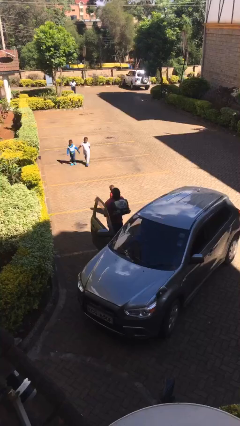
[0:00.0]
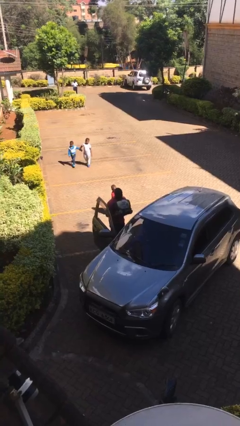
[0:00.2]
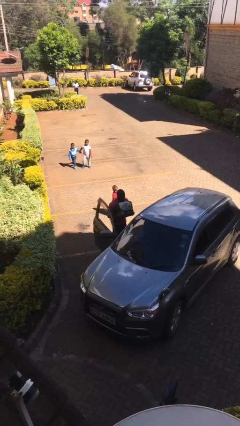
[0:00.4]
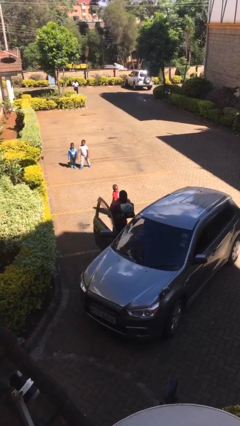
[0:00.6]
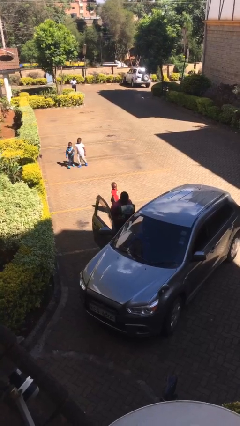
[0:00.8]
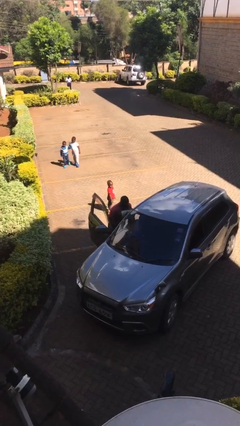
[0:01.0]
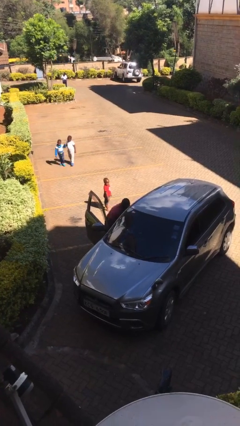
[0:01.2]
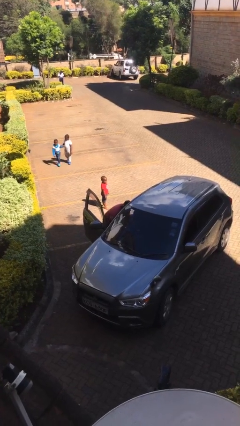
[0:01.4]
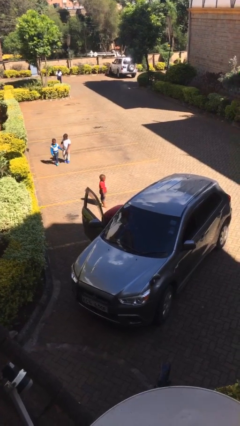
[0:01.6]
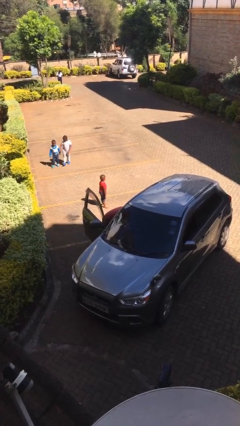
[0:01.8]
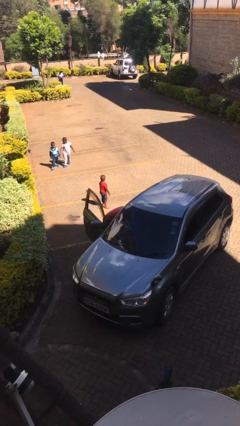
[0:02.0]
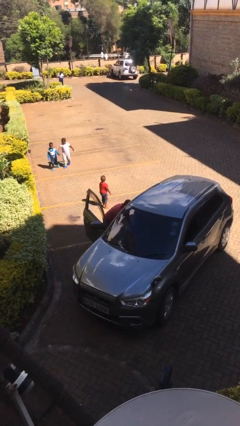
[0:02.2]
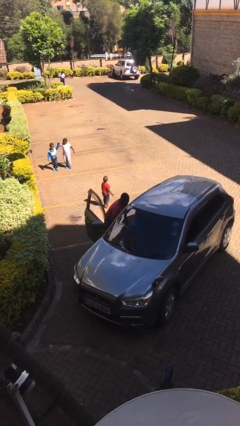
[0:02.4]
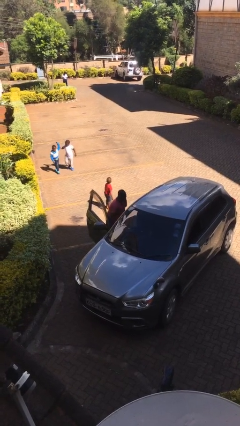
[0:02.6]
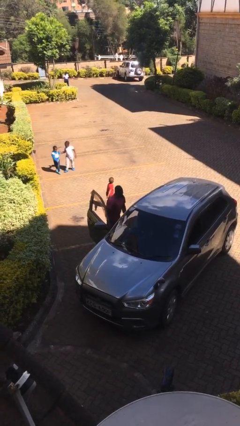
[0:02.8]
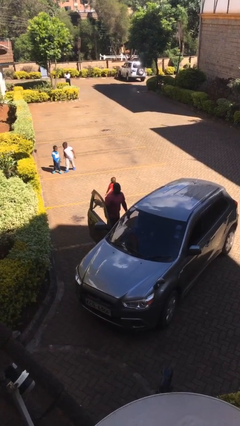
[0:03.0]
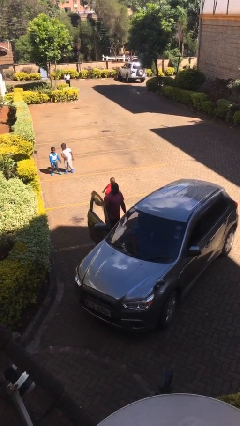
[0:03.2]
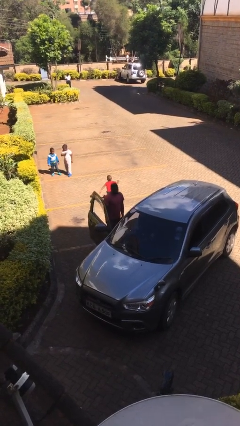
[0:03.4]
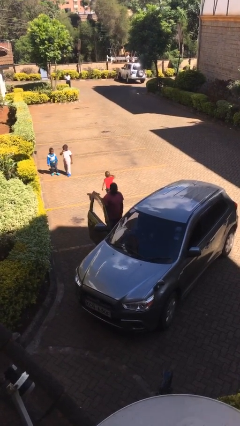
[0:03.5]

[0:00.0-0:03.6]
person loads car

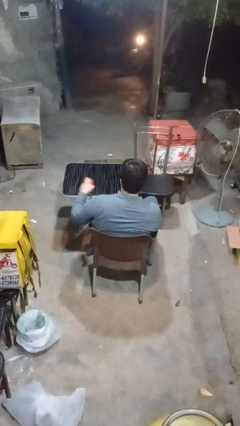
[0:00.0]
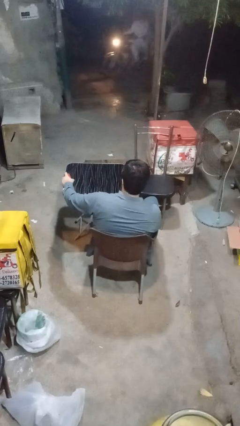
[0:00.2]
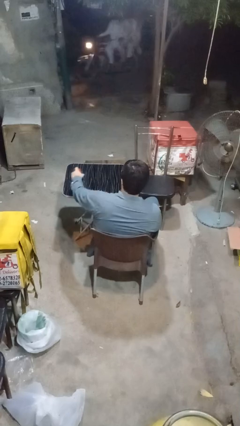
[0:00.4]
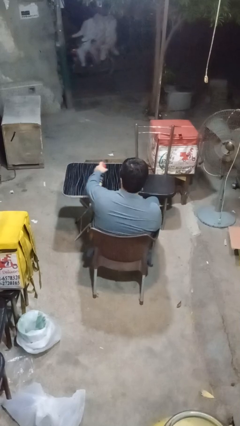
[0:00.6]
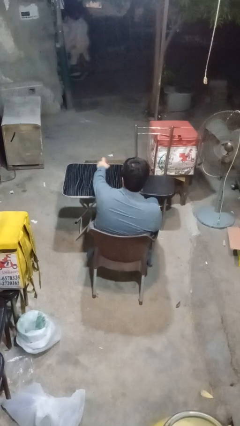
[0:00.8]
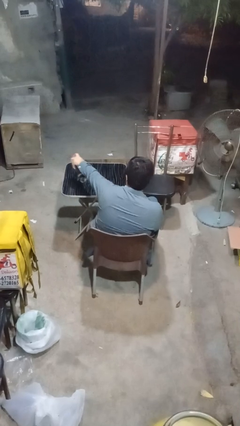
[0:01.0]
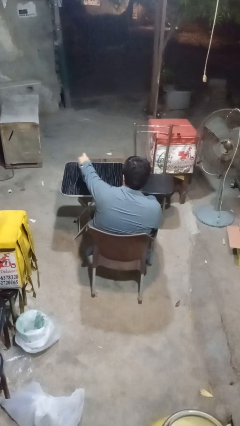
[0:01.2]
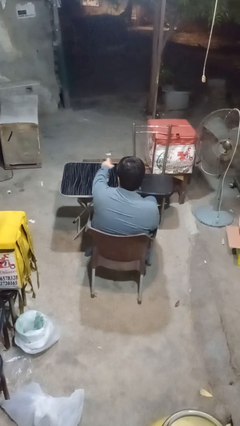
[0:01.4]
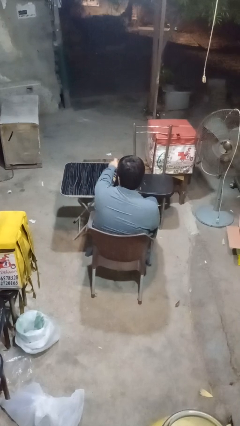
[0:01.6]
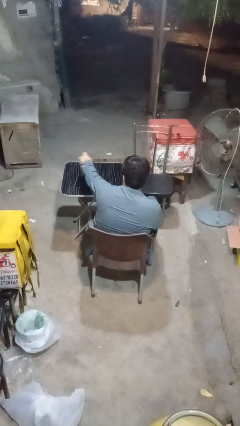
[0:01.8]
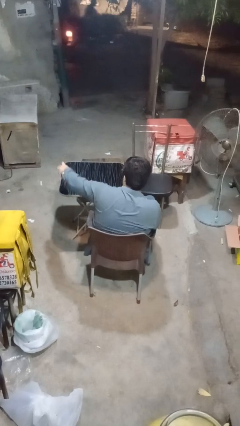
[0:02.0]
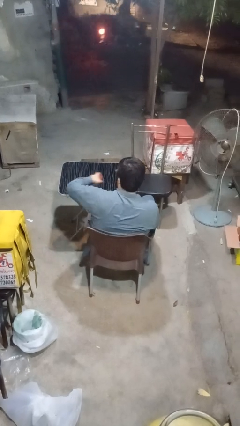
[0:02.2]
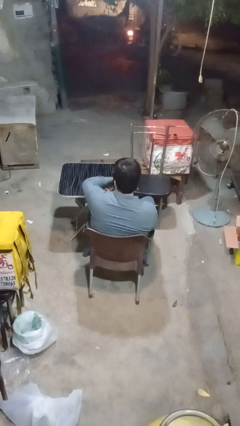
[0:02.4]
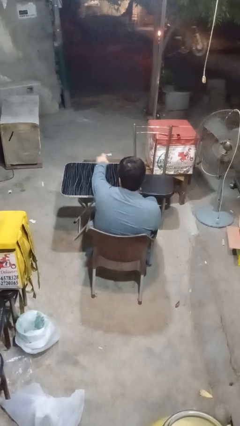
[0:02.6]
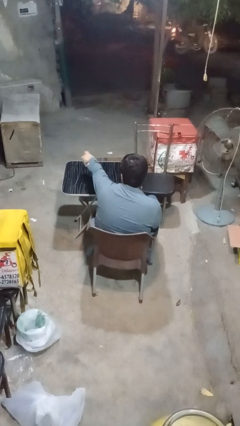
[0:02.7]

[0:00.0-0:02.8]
person sprays from bottle

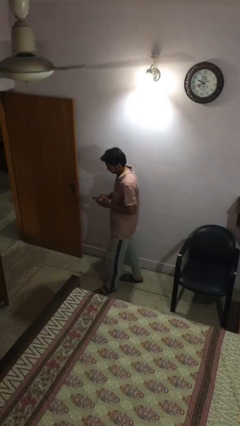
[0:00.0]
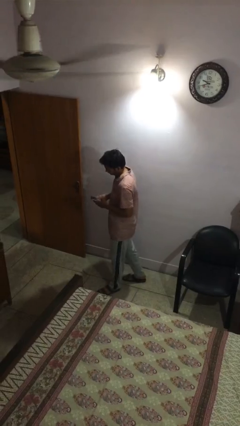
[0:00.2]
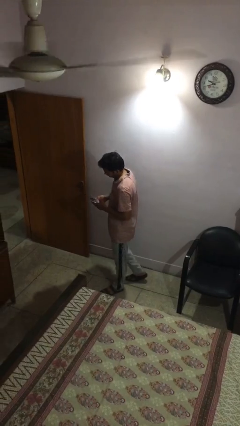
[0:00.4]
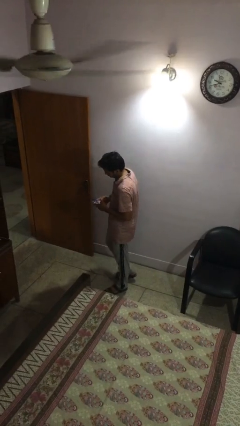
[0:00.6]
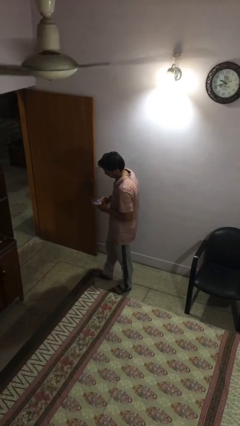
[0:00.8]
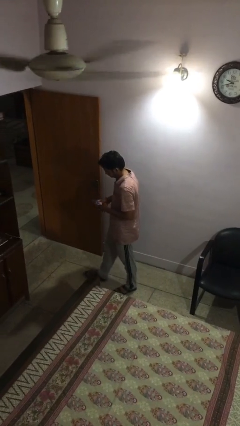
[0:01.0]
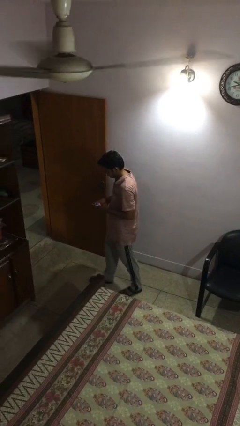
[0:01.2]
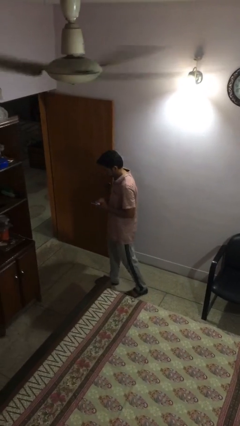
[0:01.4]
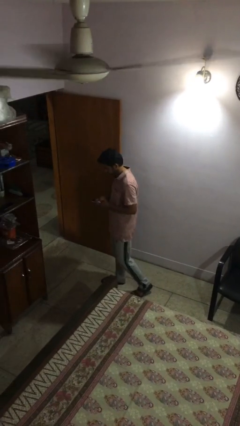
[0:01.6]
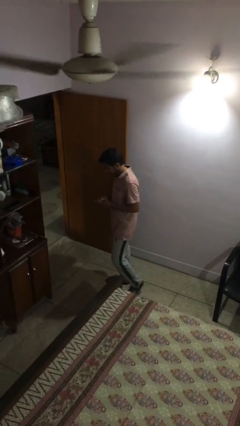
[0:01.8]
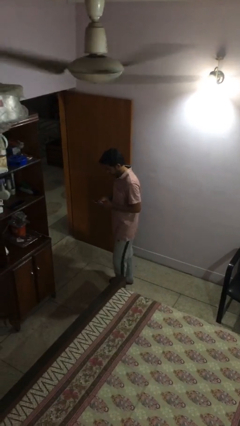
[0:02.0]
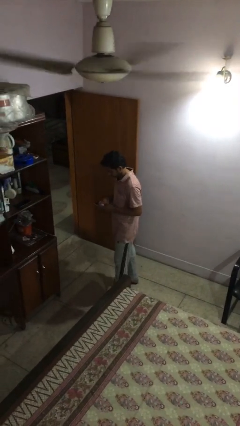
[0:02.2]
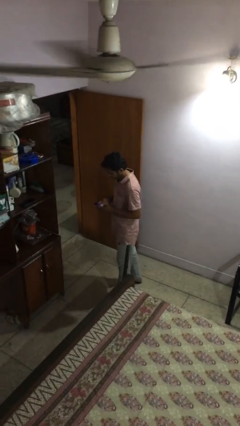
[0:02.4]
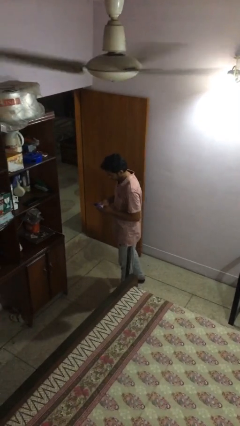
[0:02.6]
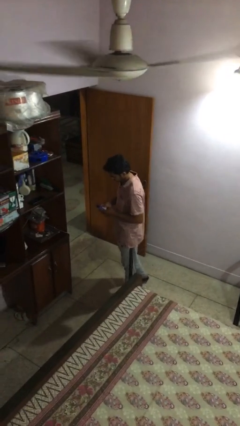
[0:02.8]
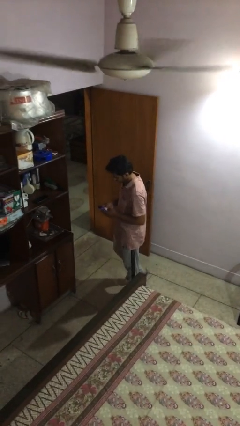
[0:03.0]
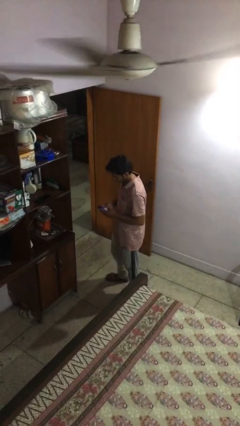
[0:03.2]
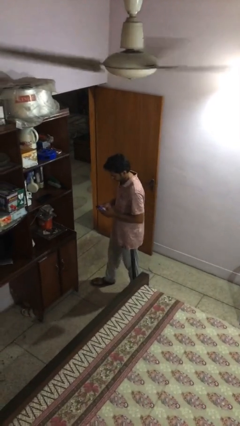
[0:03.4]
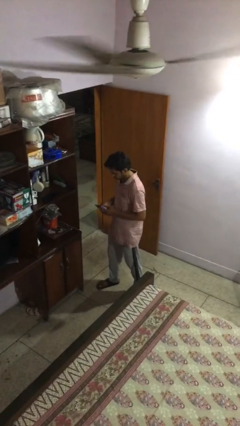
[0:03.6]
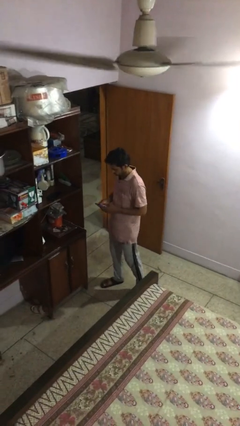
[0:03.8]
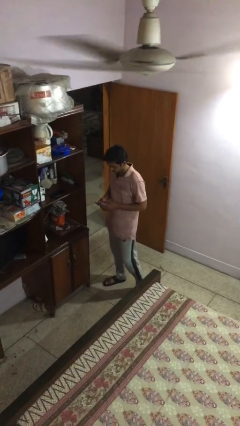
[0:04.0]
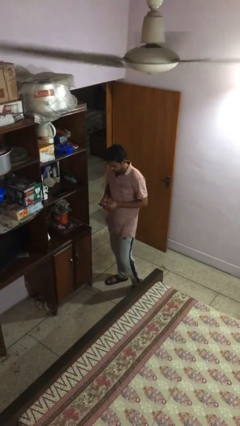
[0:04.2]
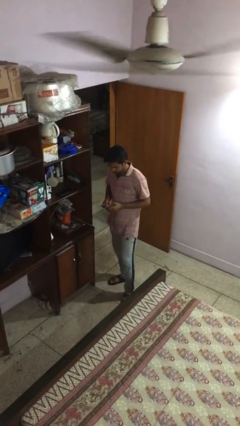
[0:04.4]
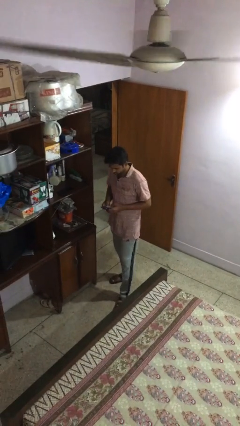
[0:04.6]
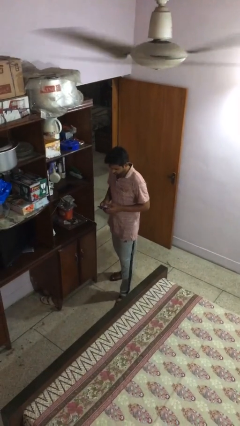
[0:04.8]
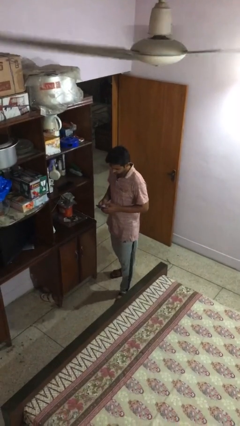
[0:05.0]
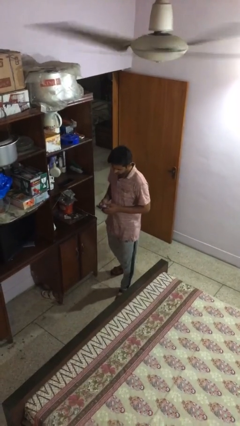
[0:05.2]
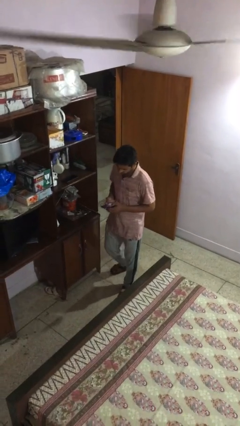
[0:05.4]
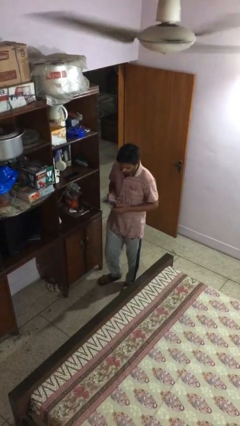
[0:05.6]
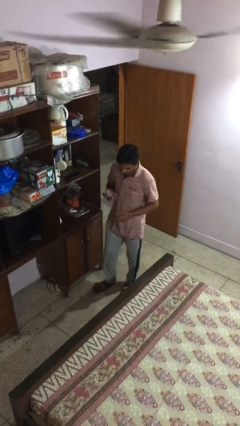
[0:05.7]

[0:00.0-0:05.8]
person texts on phone

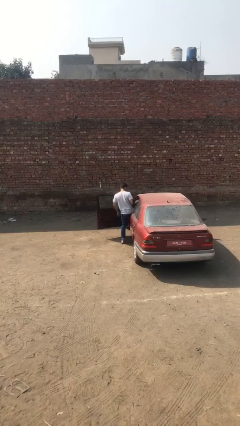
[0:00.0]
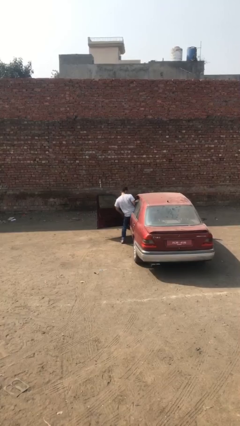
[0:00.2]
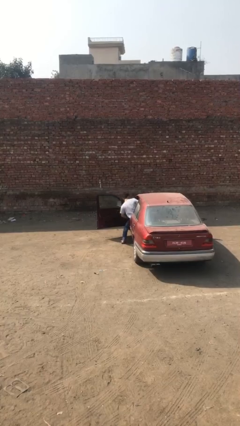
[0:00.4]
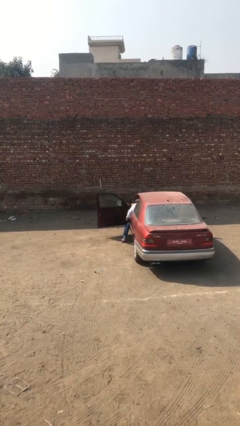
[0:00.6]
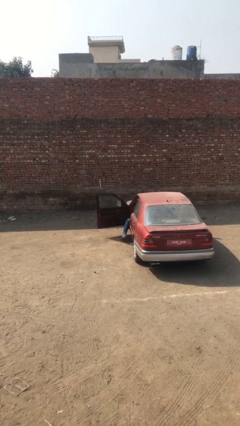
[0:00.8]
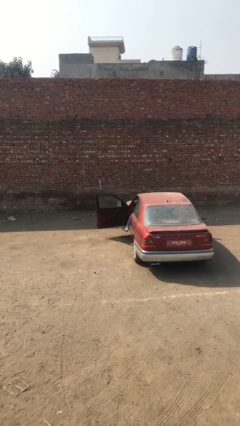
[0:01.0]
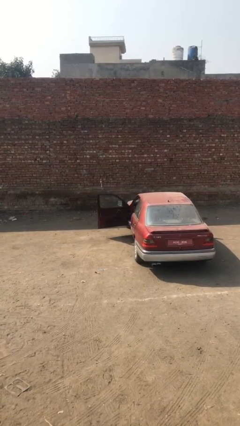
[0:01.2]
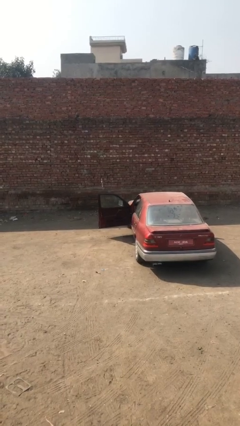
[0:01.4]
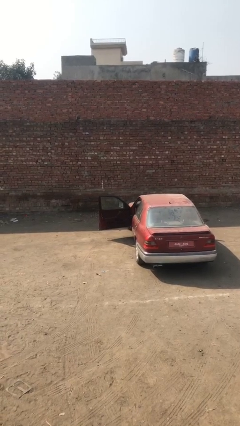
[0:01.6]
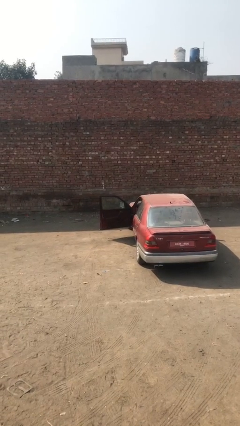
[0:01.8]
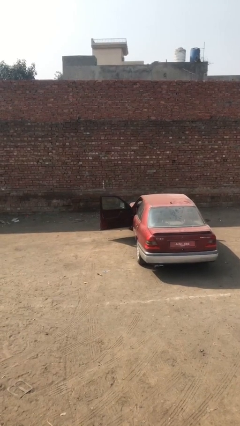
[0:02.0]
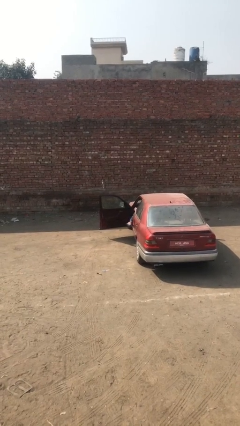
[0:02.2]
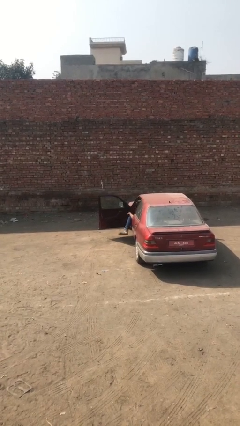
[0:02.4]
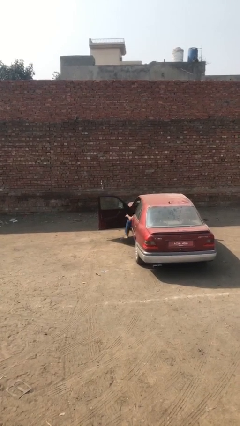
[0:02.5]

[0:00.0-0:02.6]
person enters car

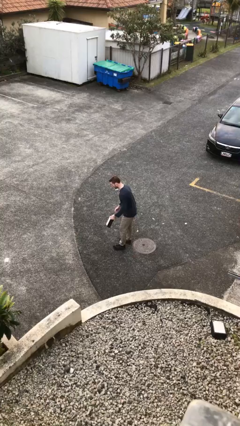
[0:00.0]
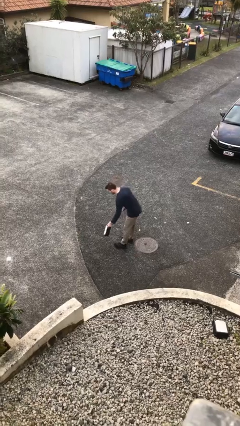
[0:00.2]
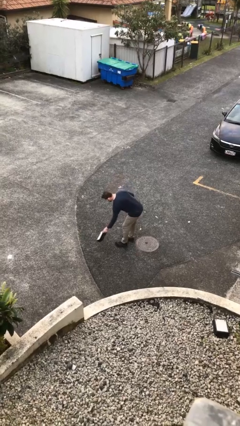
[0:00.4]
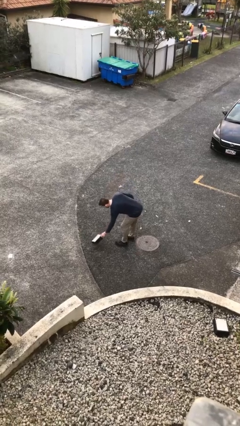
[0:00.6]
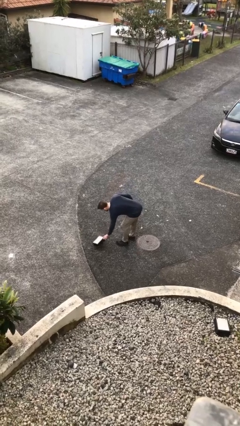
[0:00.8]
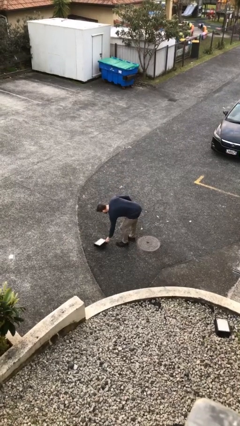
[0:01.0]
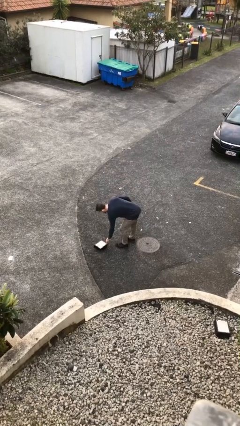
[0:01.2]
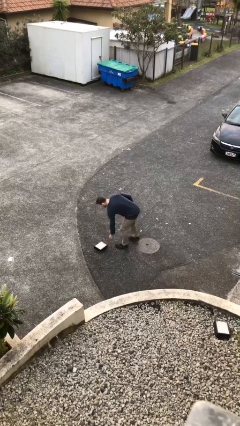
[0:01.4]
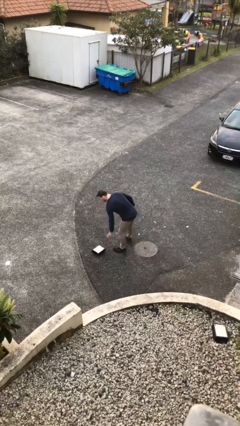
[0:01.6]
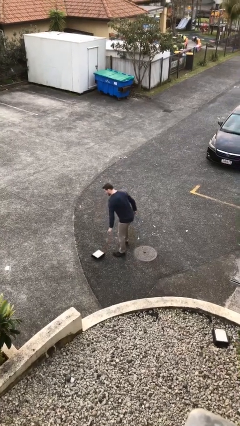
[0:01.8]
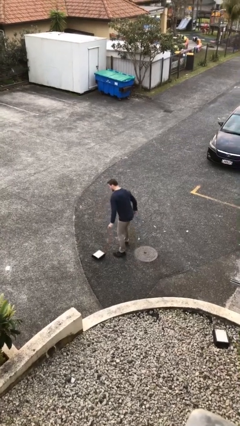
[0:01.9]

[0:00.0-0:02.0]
person puts down object on floor

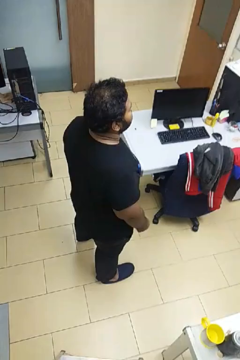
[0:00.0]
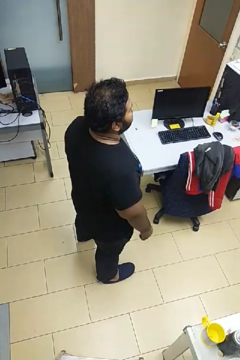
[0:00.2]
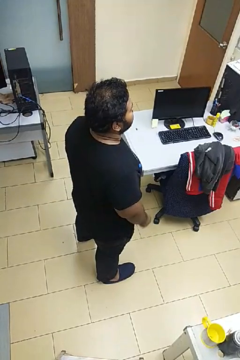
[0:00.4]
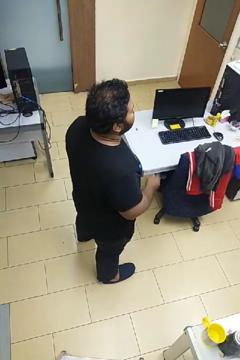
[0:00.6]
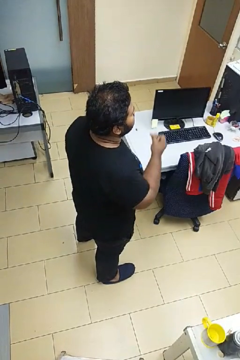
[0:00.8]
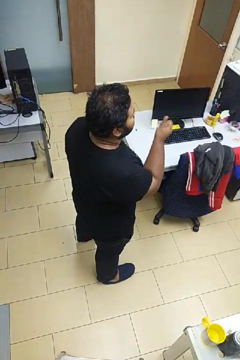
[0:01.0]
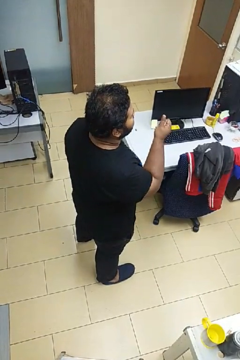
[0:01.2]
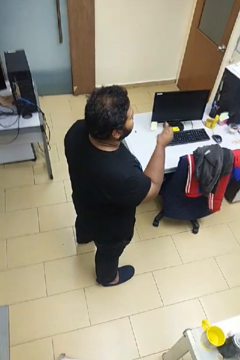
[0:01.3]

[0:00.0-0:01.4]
person snaps fingers
